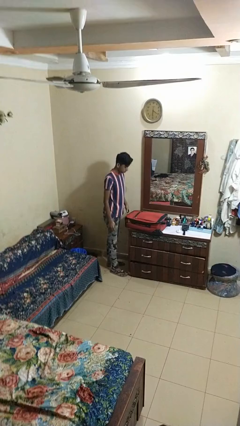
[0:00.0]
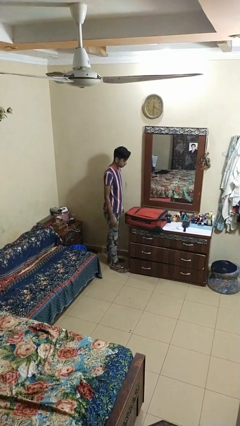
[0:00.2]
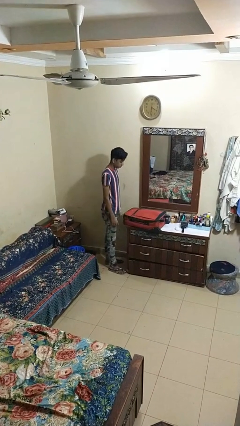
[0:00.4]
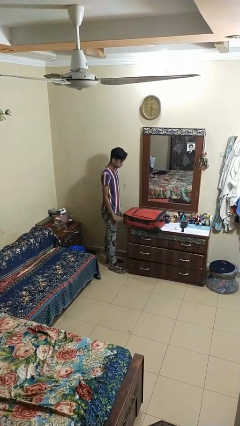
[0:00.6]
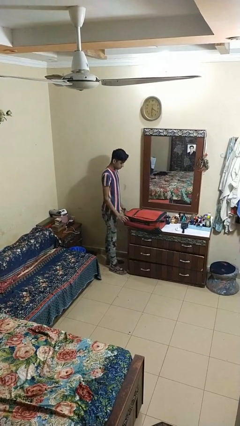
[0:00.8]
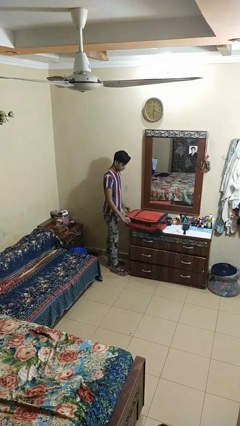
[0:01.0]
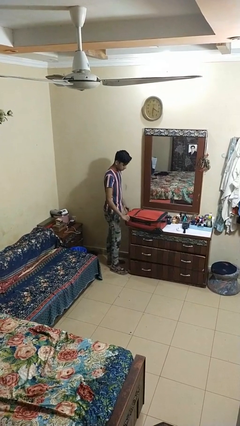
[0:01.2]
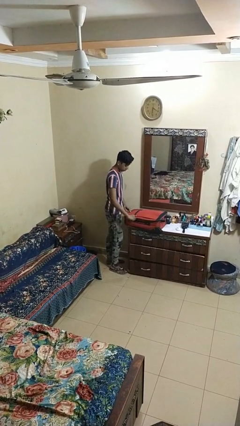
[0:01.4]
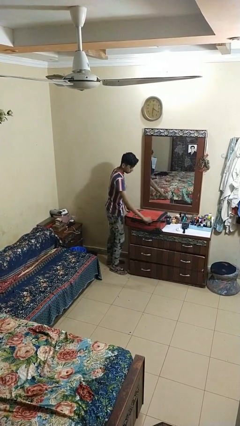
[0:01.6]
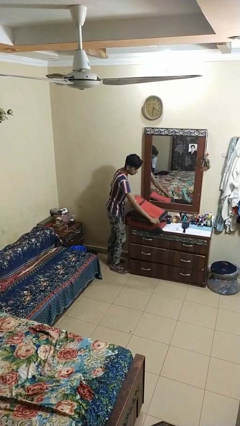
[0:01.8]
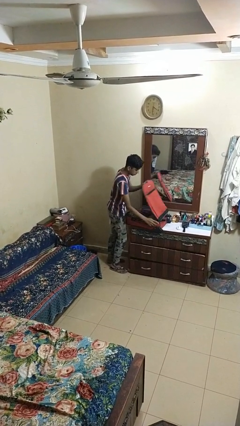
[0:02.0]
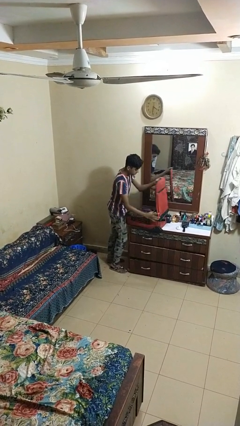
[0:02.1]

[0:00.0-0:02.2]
person opens suitcase

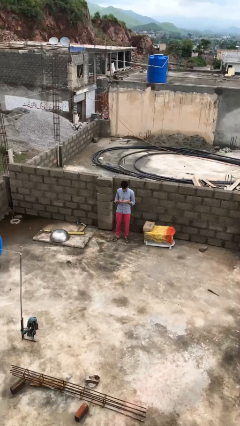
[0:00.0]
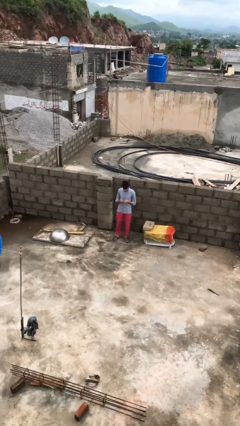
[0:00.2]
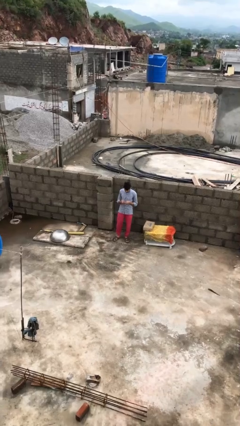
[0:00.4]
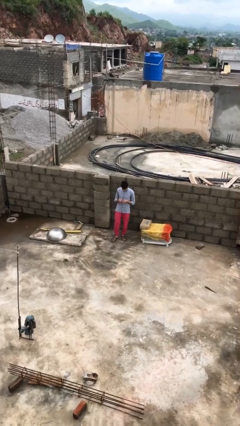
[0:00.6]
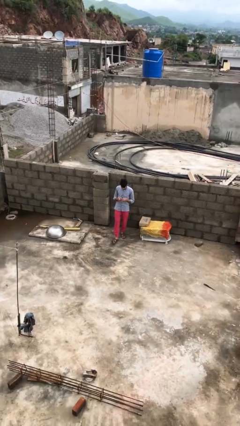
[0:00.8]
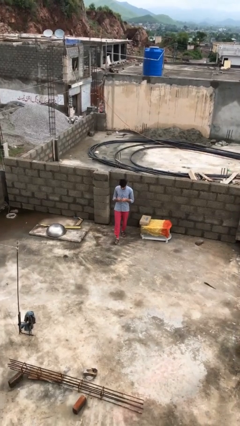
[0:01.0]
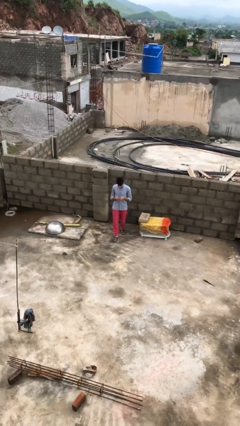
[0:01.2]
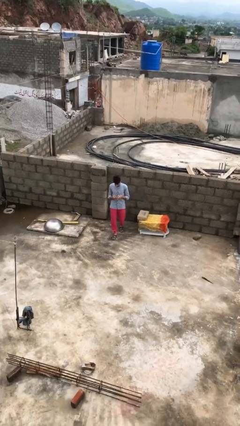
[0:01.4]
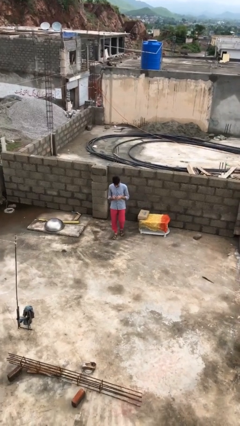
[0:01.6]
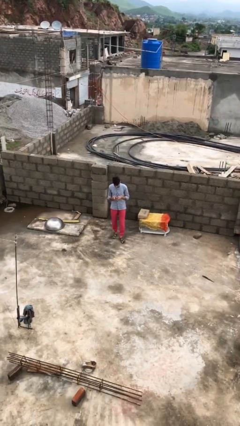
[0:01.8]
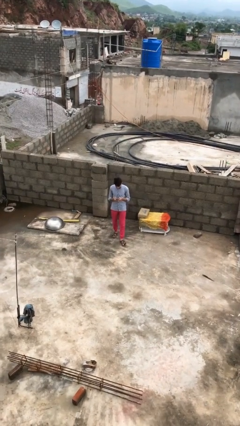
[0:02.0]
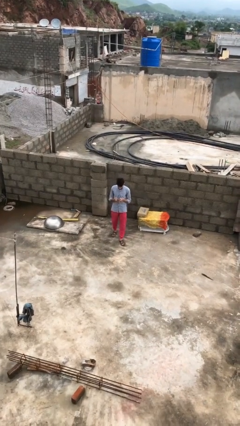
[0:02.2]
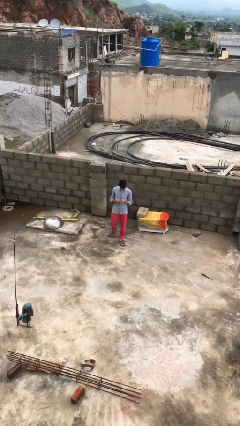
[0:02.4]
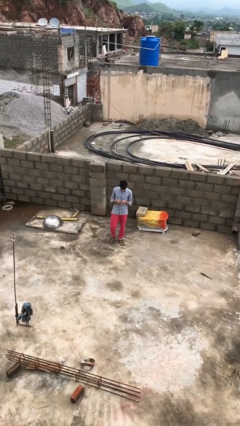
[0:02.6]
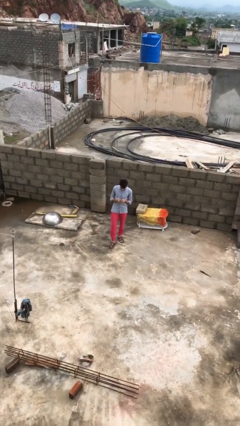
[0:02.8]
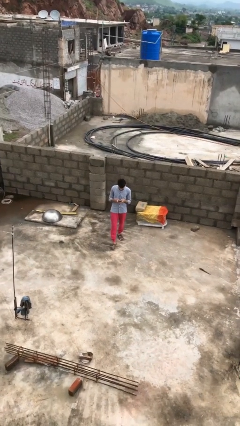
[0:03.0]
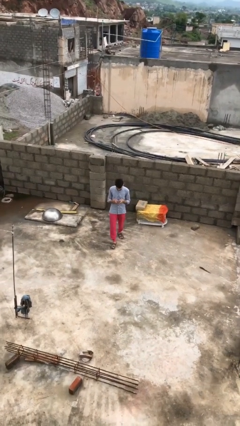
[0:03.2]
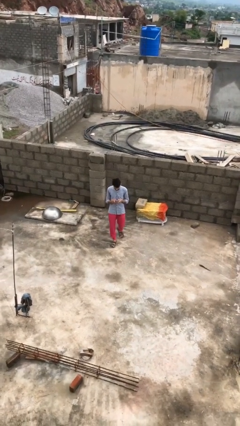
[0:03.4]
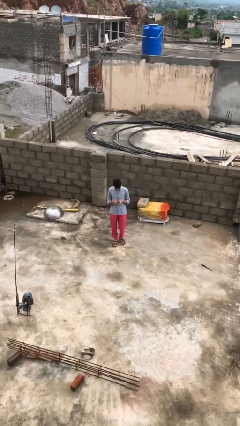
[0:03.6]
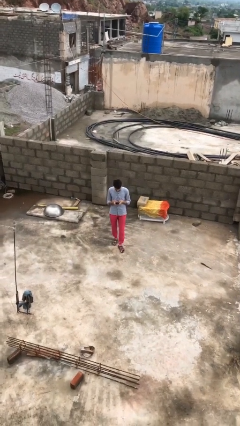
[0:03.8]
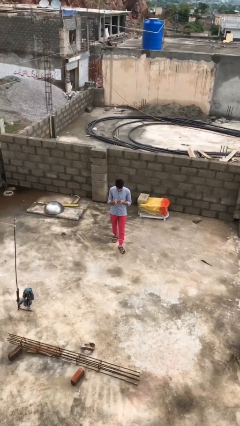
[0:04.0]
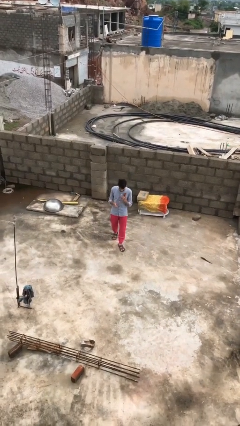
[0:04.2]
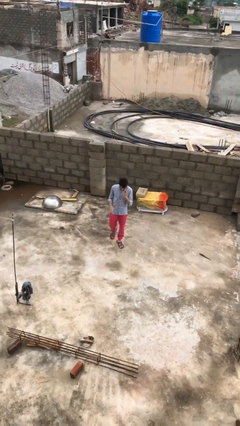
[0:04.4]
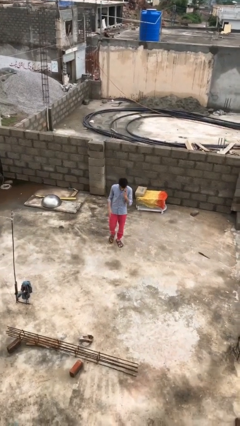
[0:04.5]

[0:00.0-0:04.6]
person texts on phone

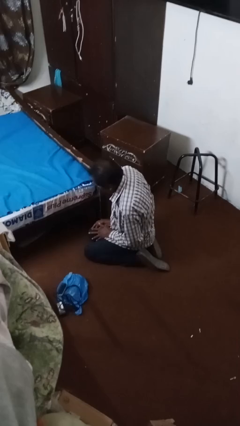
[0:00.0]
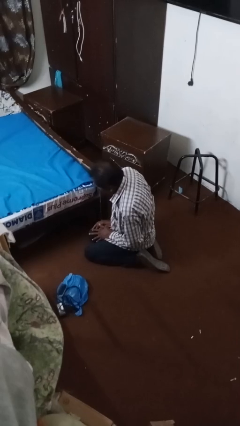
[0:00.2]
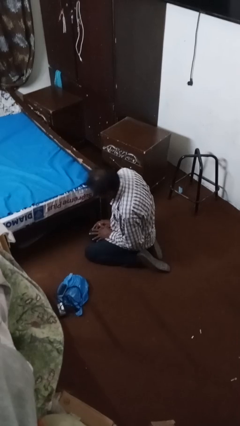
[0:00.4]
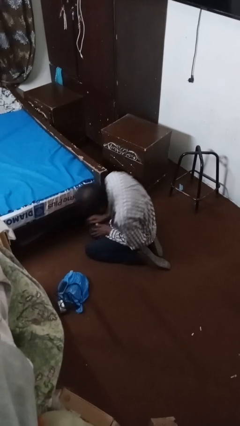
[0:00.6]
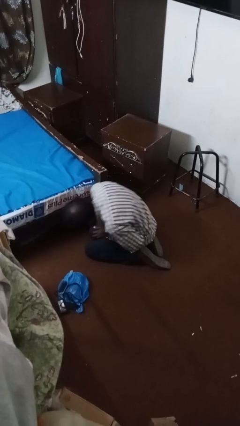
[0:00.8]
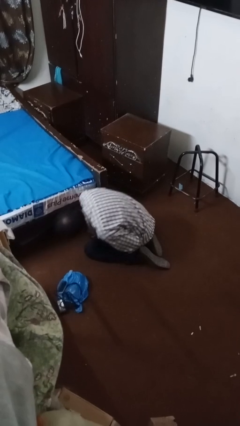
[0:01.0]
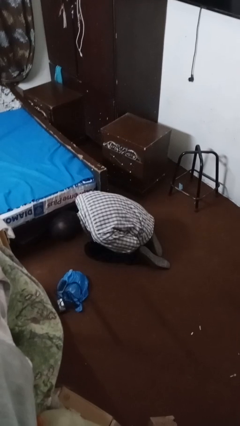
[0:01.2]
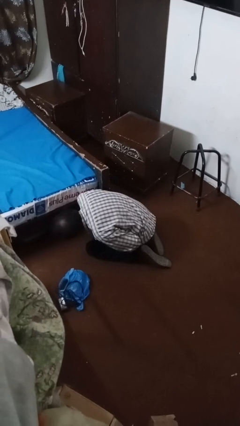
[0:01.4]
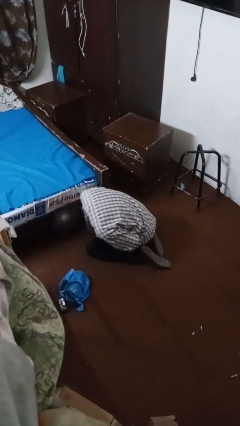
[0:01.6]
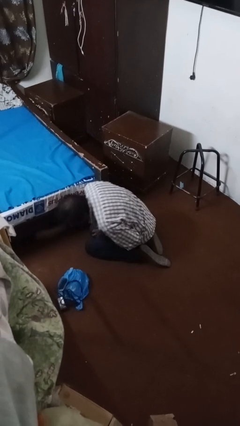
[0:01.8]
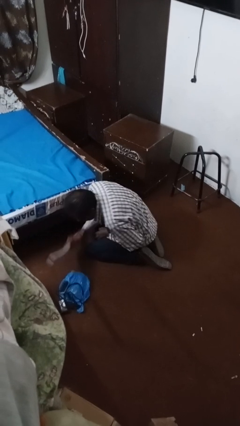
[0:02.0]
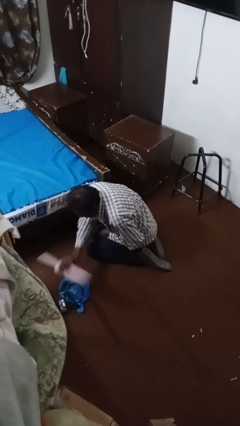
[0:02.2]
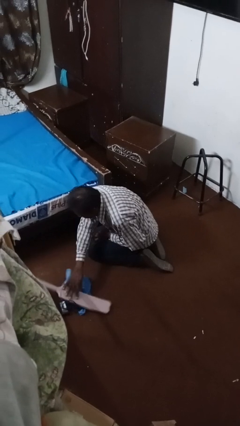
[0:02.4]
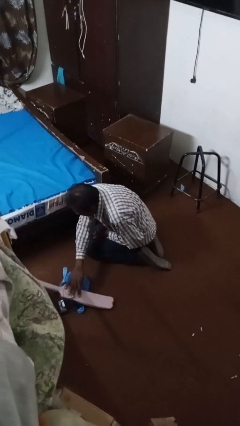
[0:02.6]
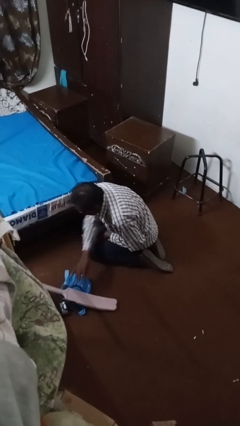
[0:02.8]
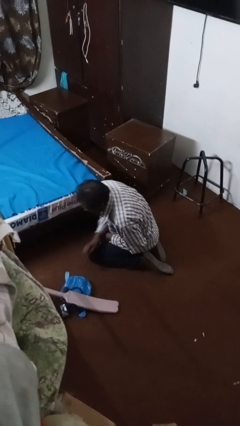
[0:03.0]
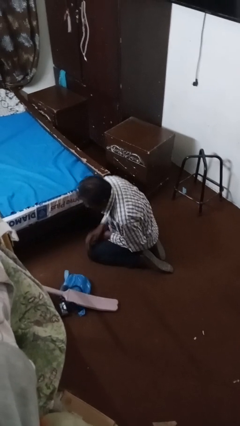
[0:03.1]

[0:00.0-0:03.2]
person searches under bed

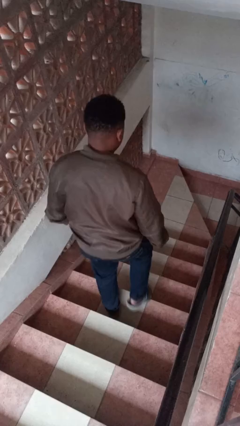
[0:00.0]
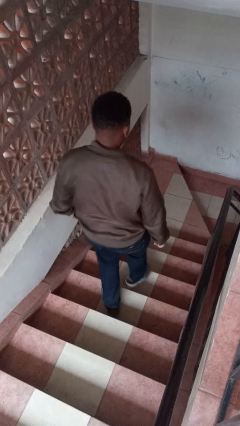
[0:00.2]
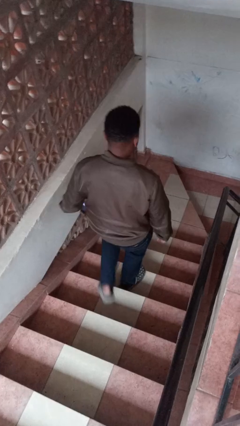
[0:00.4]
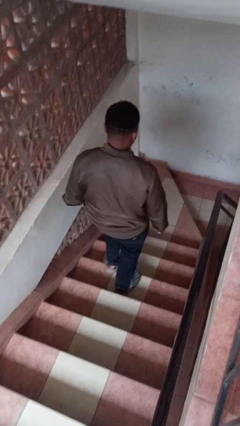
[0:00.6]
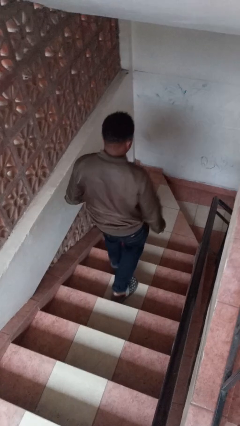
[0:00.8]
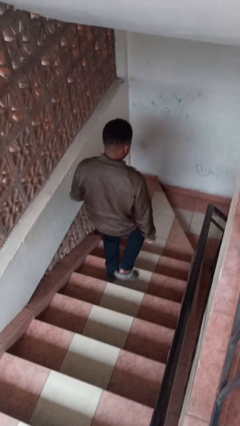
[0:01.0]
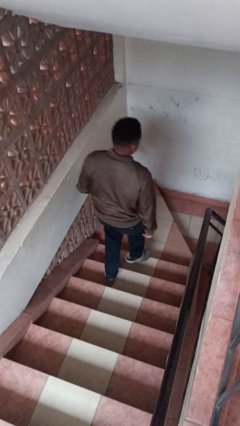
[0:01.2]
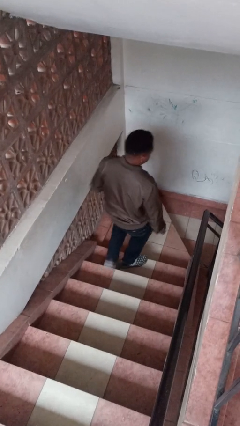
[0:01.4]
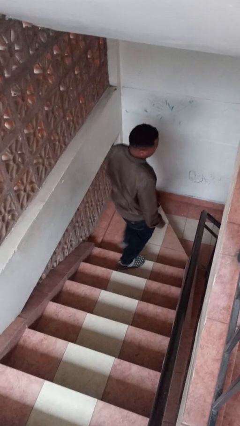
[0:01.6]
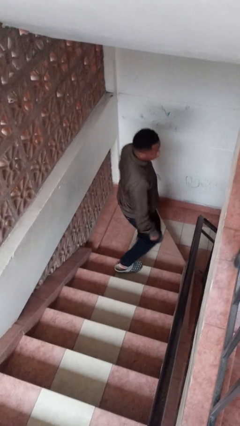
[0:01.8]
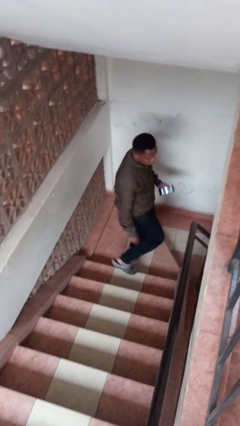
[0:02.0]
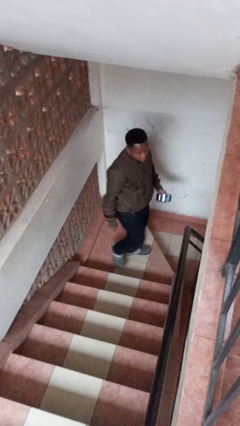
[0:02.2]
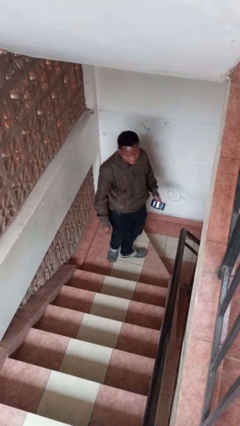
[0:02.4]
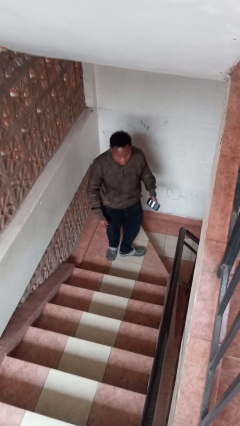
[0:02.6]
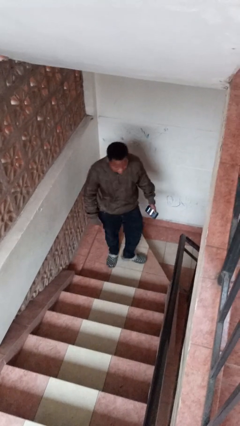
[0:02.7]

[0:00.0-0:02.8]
person climbs down stairs

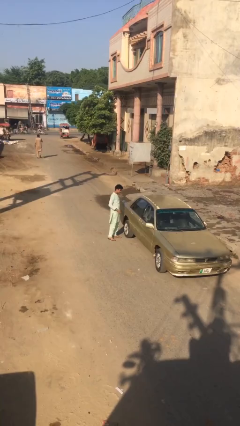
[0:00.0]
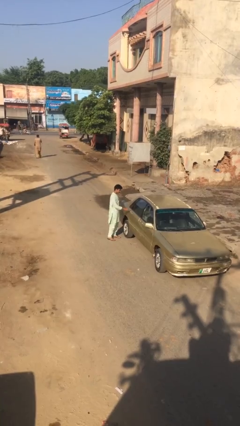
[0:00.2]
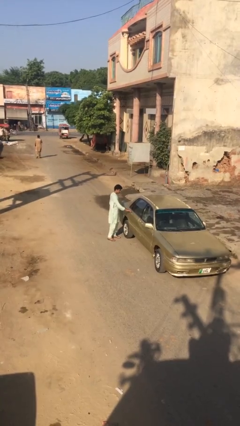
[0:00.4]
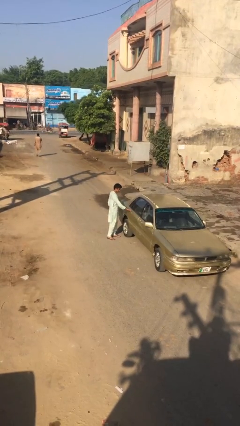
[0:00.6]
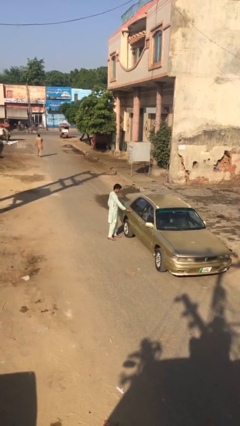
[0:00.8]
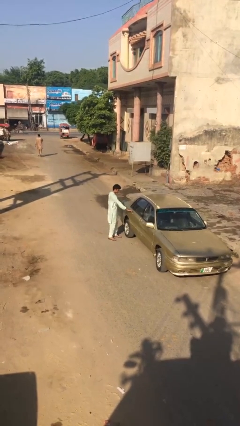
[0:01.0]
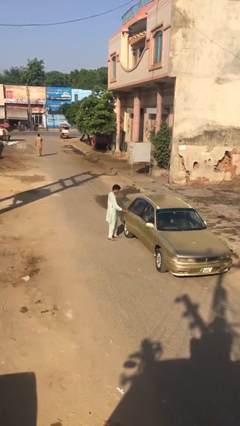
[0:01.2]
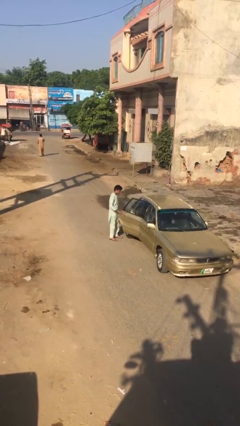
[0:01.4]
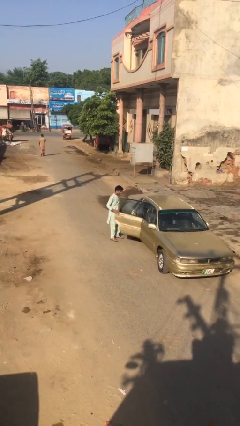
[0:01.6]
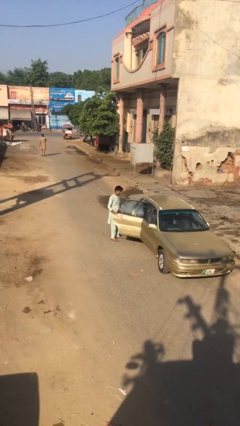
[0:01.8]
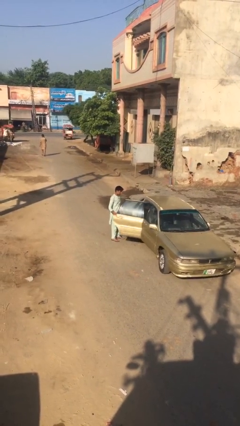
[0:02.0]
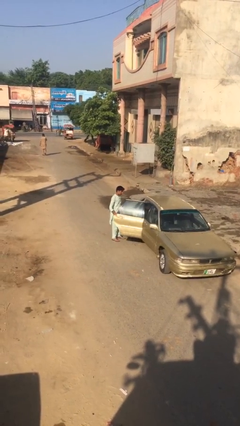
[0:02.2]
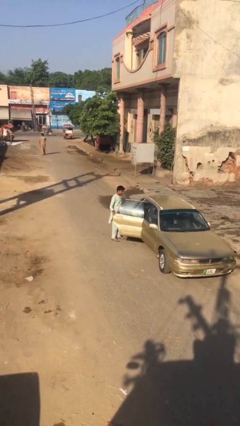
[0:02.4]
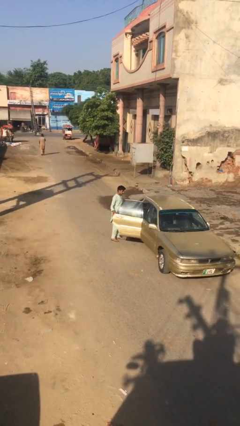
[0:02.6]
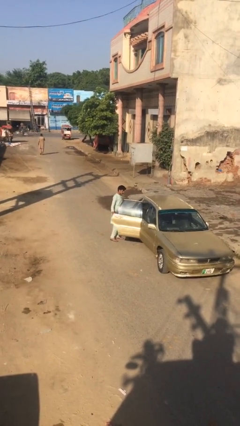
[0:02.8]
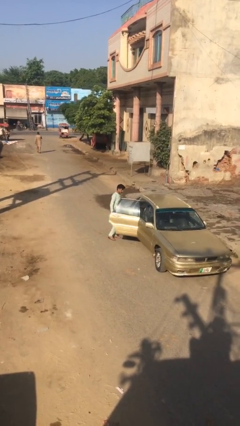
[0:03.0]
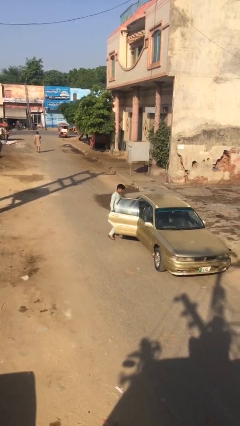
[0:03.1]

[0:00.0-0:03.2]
person opens car door

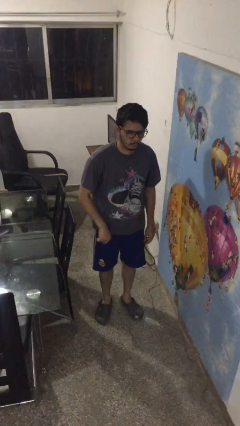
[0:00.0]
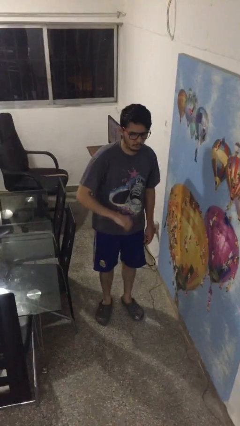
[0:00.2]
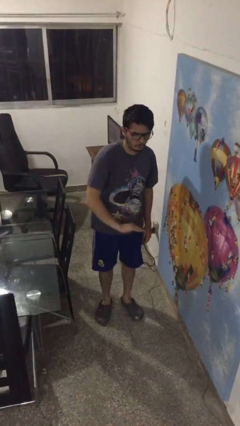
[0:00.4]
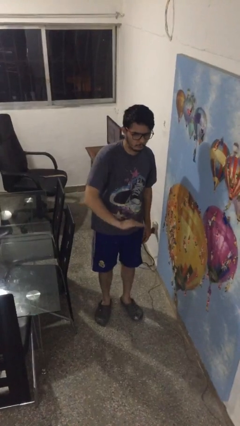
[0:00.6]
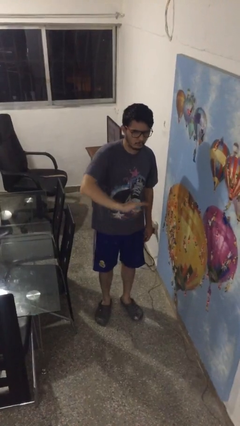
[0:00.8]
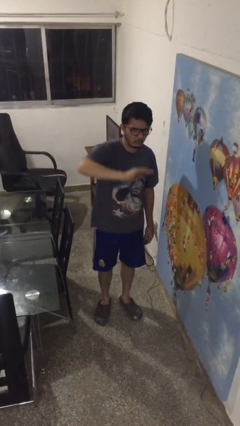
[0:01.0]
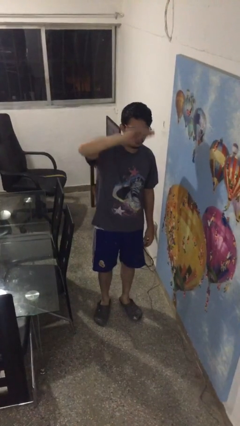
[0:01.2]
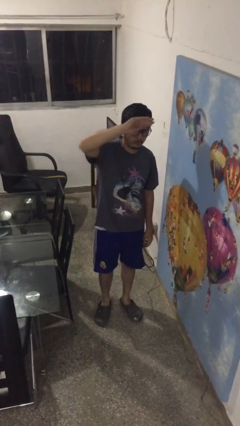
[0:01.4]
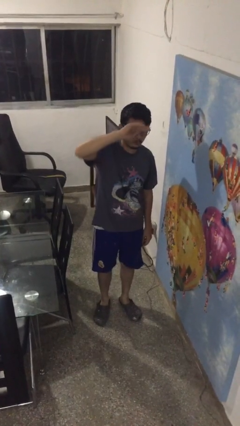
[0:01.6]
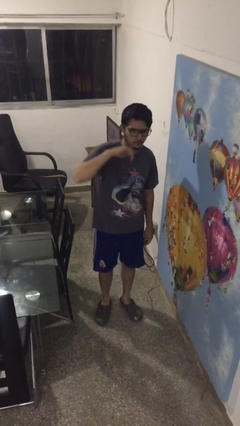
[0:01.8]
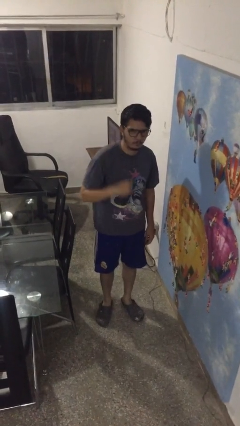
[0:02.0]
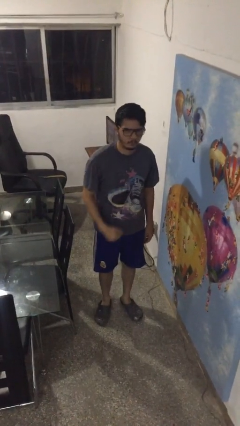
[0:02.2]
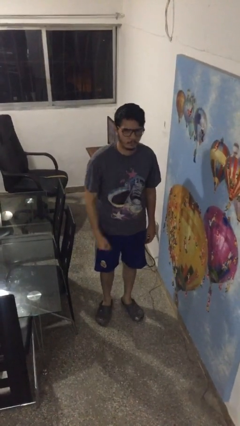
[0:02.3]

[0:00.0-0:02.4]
person gestures swipe up
